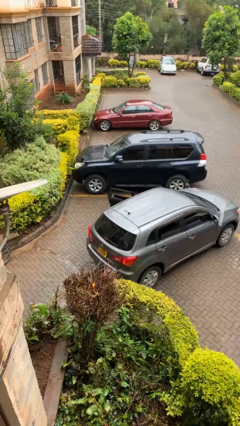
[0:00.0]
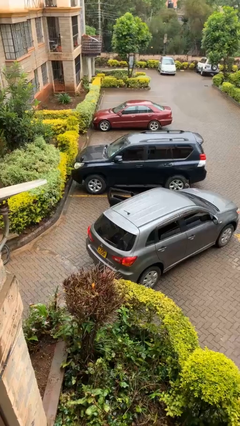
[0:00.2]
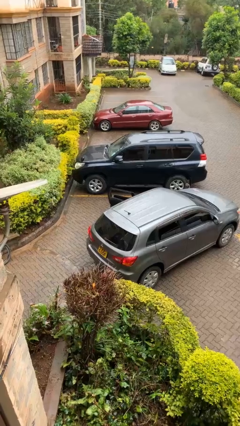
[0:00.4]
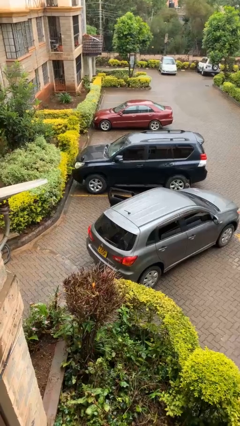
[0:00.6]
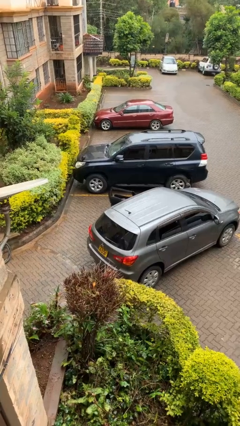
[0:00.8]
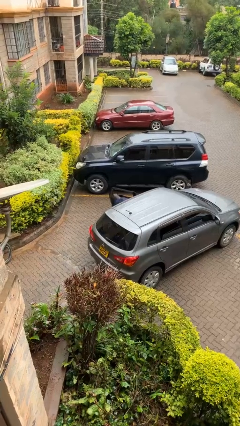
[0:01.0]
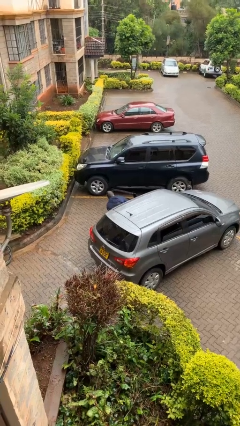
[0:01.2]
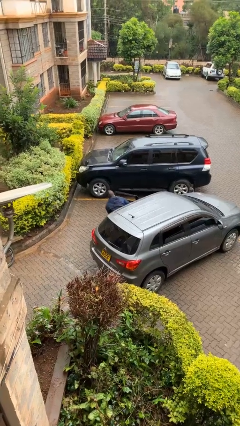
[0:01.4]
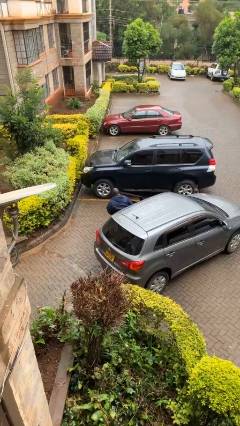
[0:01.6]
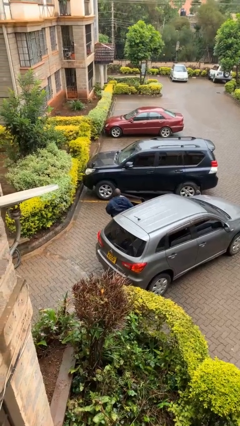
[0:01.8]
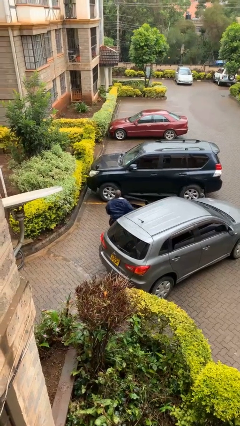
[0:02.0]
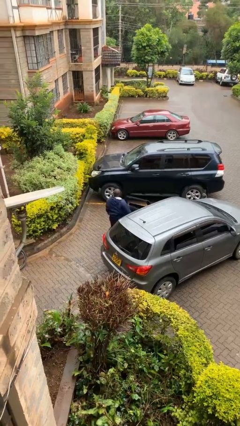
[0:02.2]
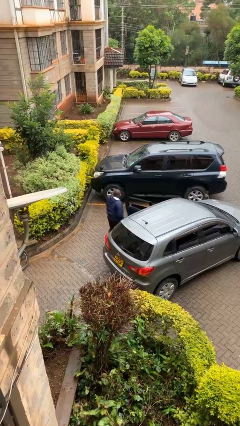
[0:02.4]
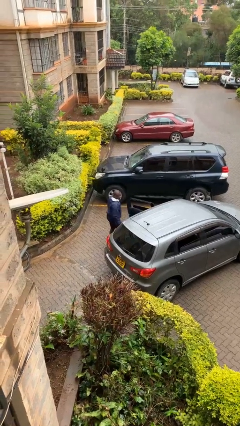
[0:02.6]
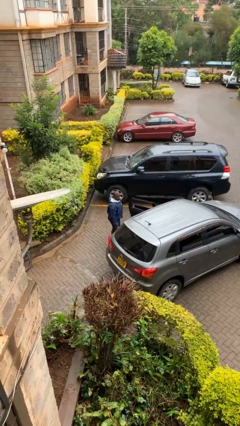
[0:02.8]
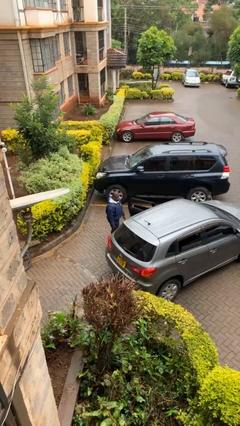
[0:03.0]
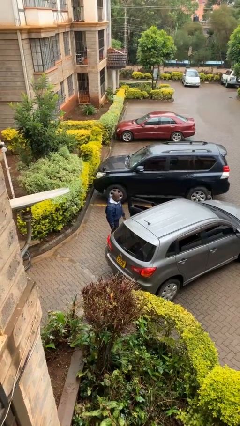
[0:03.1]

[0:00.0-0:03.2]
person exits car

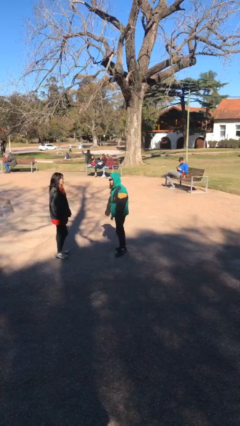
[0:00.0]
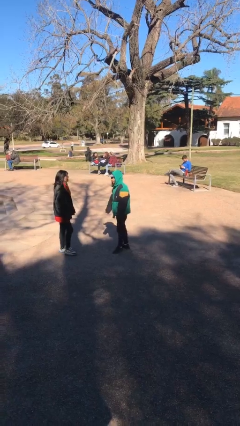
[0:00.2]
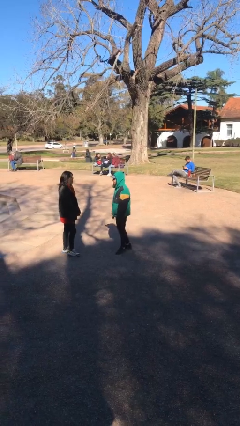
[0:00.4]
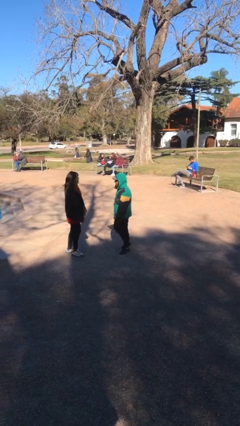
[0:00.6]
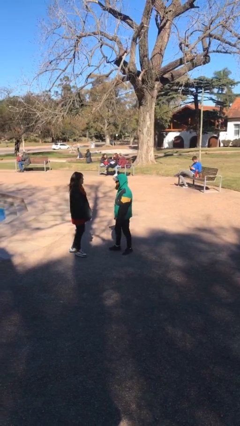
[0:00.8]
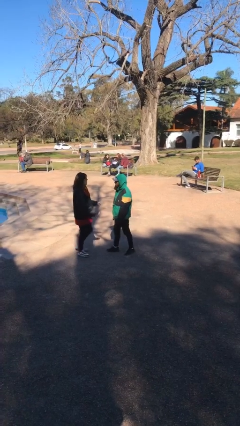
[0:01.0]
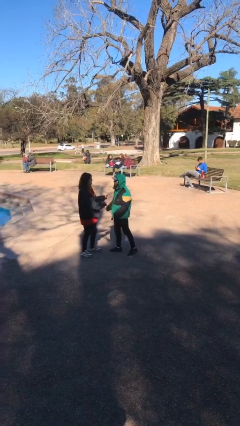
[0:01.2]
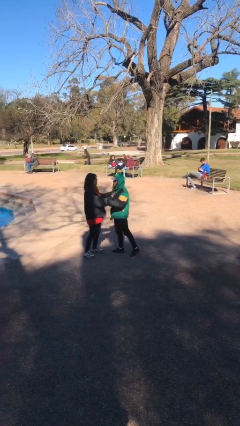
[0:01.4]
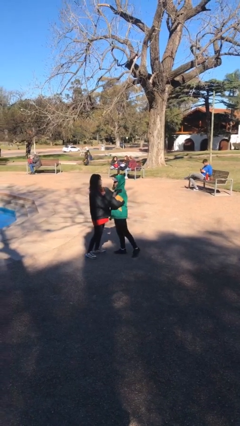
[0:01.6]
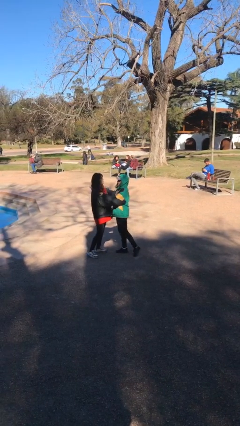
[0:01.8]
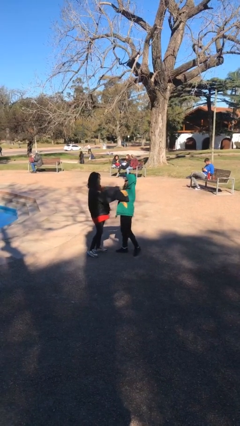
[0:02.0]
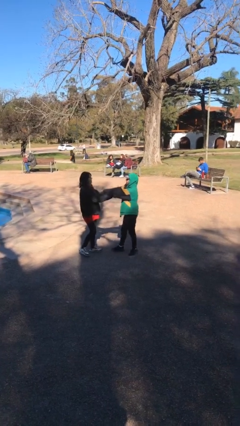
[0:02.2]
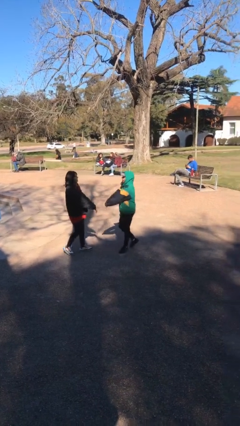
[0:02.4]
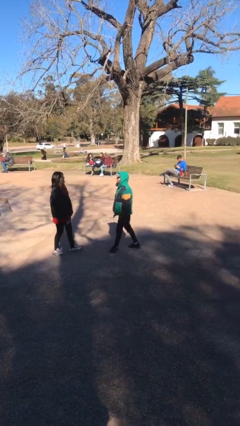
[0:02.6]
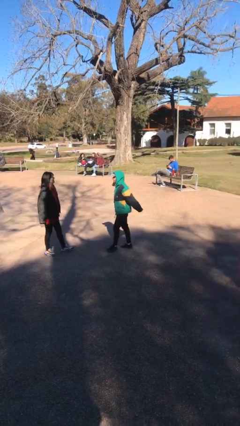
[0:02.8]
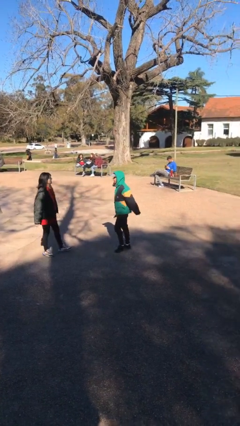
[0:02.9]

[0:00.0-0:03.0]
person shoves person

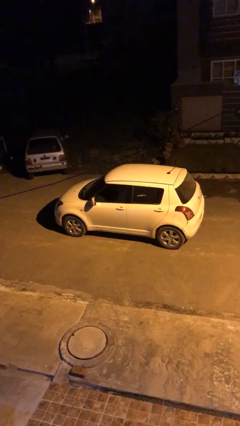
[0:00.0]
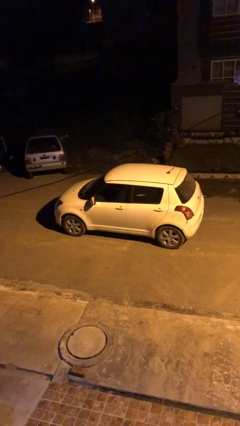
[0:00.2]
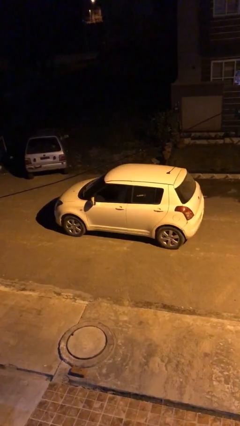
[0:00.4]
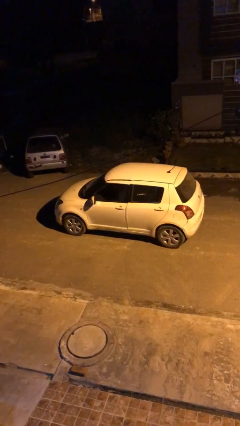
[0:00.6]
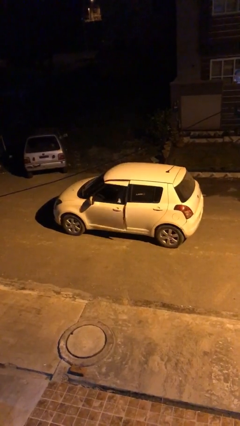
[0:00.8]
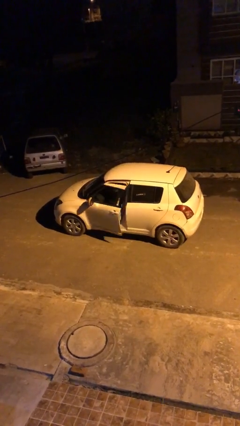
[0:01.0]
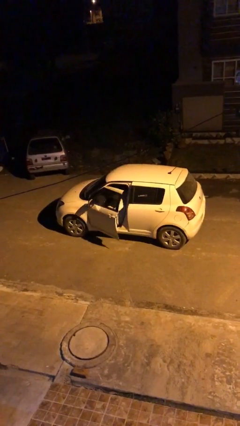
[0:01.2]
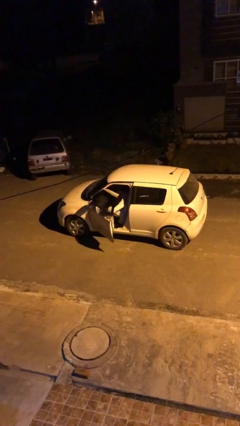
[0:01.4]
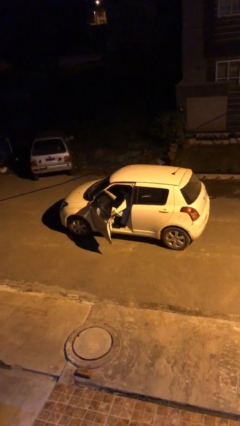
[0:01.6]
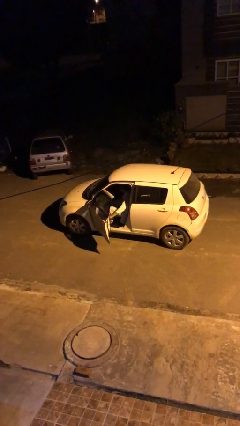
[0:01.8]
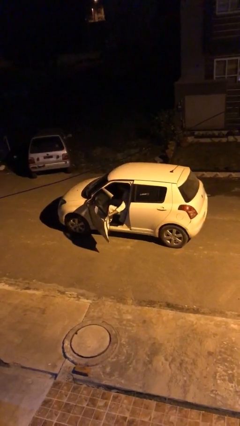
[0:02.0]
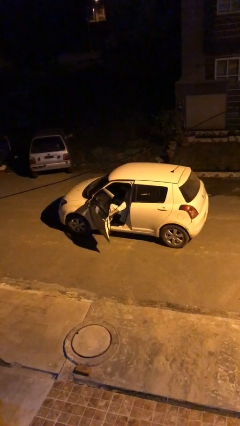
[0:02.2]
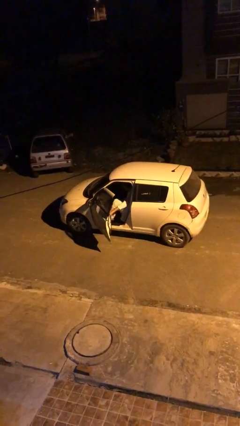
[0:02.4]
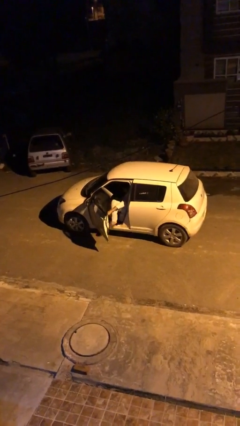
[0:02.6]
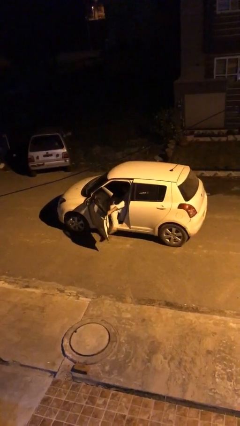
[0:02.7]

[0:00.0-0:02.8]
person opens car door

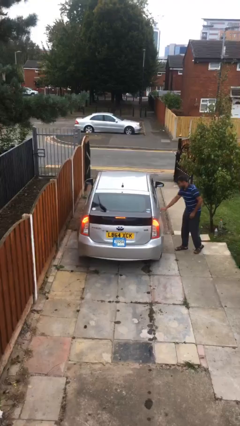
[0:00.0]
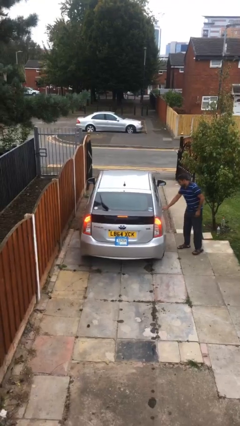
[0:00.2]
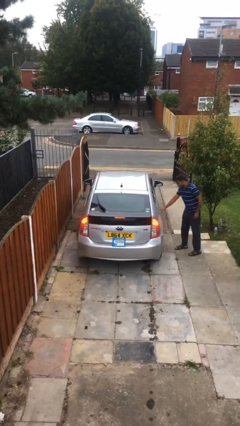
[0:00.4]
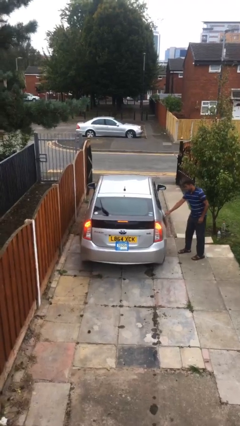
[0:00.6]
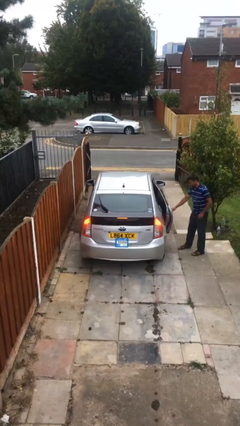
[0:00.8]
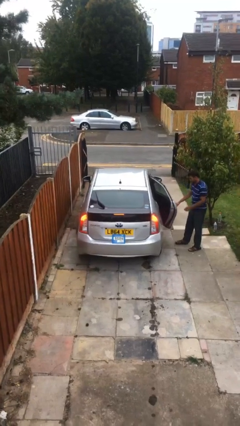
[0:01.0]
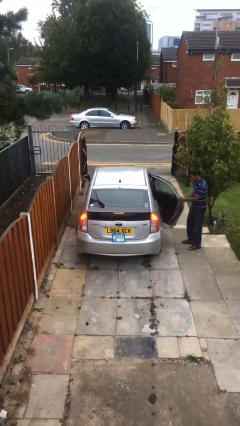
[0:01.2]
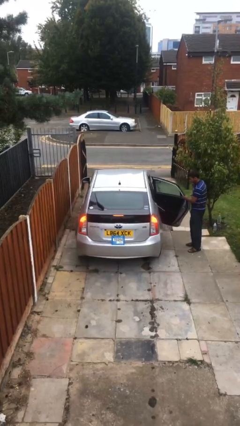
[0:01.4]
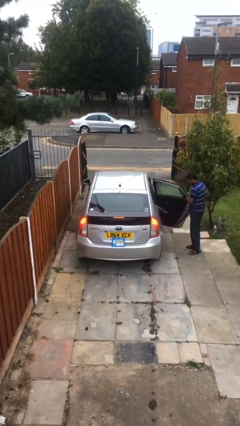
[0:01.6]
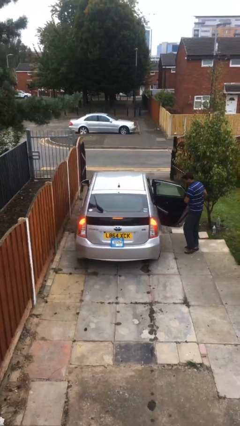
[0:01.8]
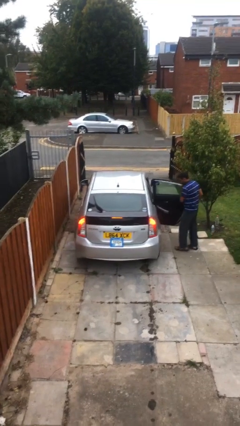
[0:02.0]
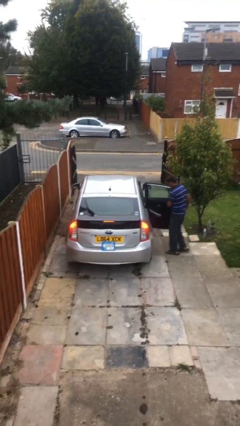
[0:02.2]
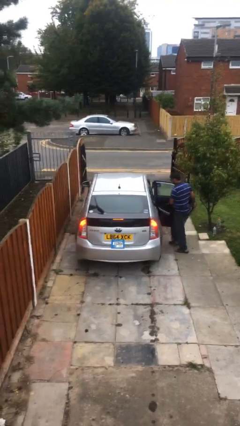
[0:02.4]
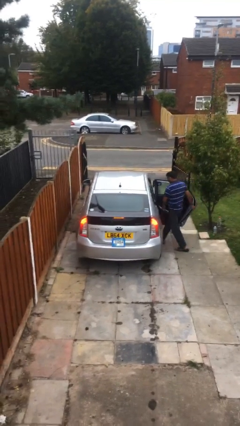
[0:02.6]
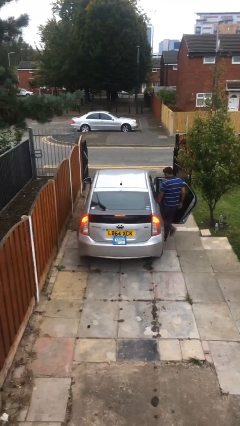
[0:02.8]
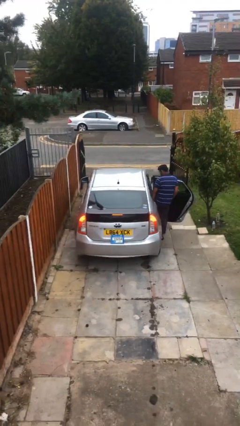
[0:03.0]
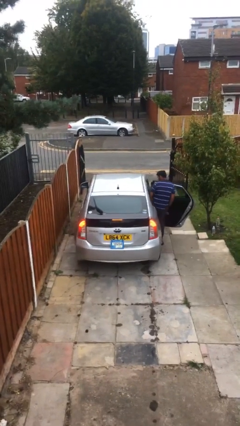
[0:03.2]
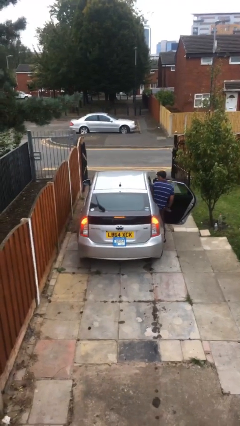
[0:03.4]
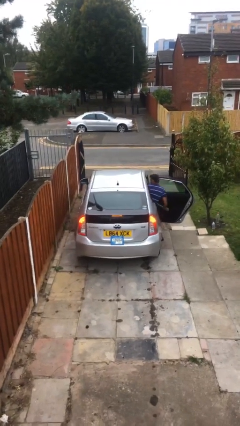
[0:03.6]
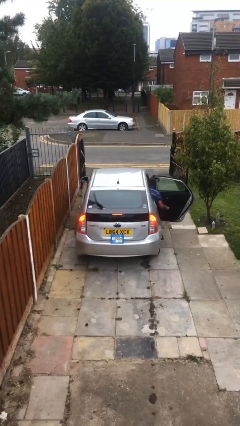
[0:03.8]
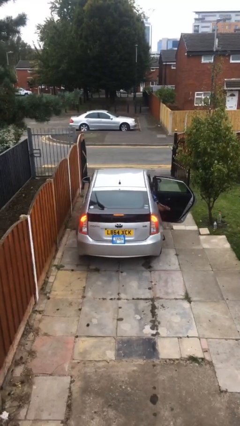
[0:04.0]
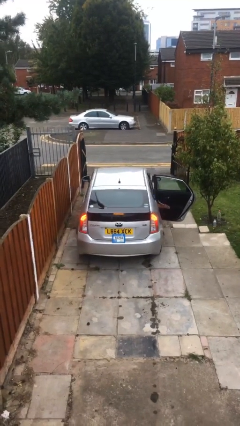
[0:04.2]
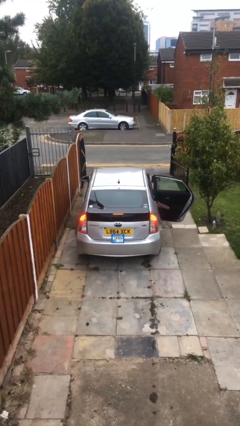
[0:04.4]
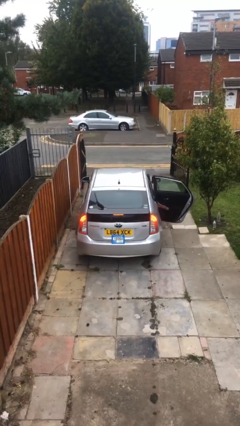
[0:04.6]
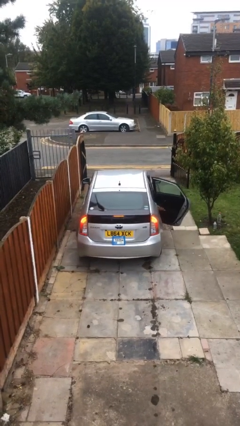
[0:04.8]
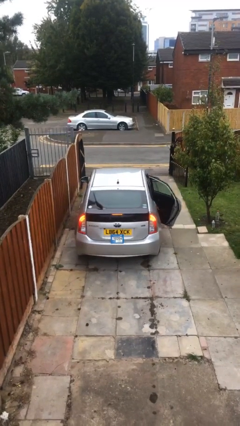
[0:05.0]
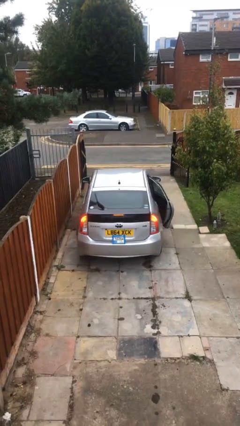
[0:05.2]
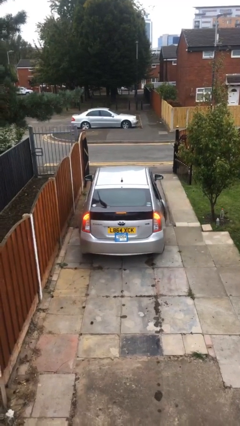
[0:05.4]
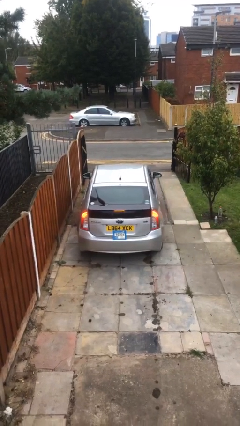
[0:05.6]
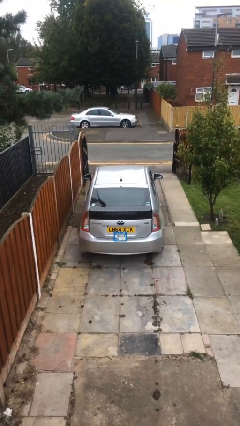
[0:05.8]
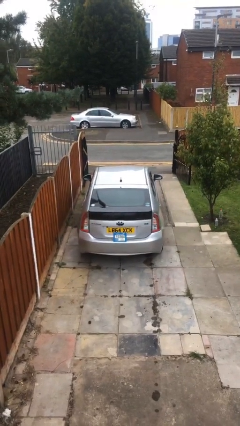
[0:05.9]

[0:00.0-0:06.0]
car picks up person

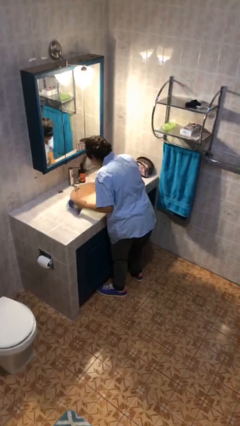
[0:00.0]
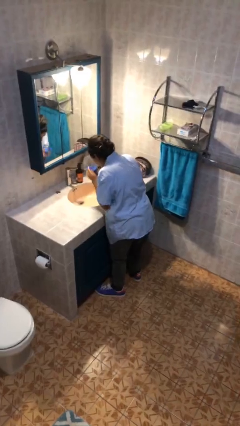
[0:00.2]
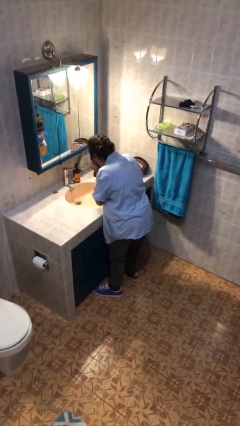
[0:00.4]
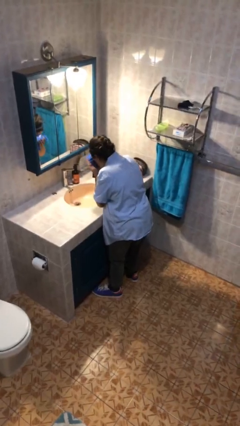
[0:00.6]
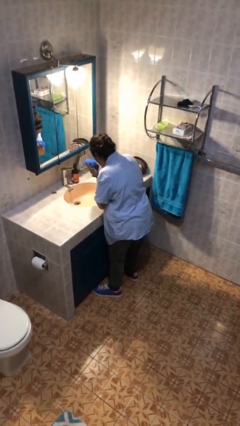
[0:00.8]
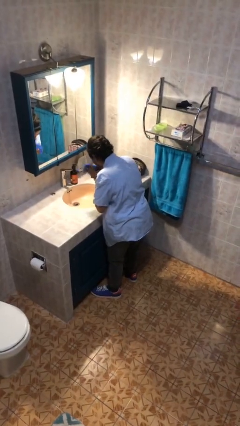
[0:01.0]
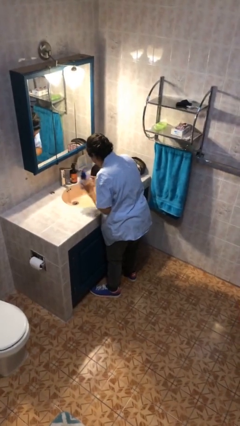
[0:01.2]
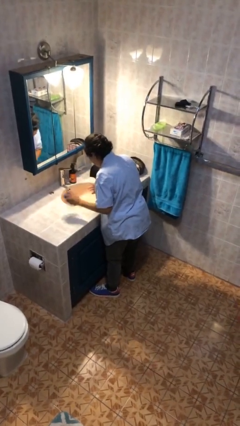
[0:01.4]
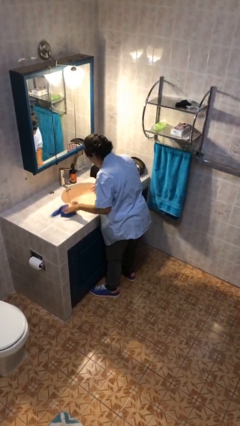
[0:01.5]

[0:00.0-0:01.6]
person dries face with towel

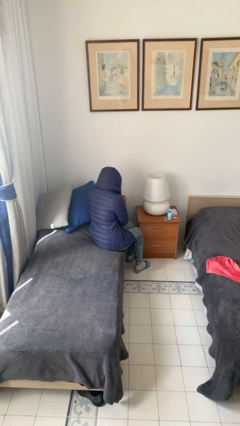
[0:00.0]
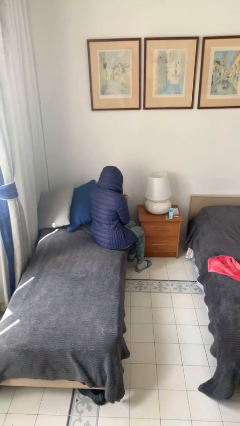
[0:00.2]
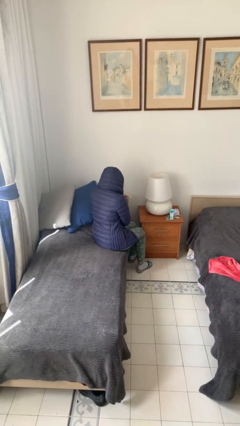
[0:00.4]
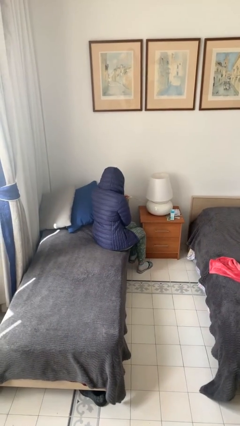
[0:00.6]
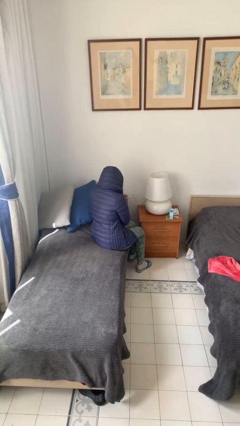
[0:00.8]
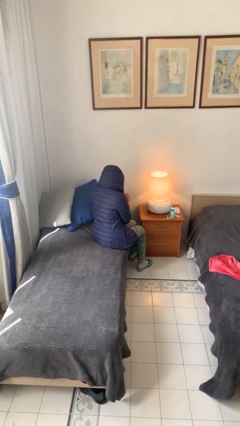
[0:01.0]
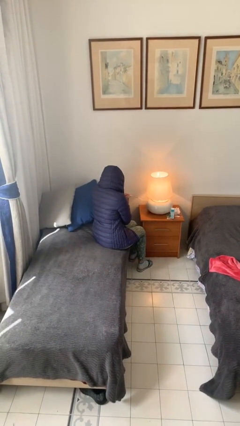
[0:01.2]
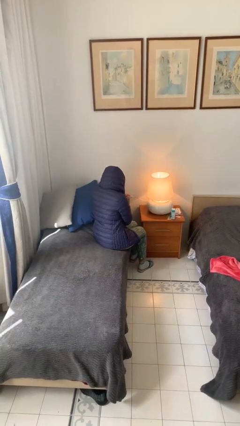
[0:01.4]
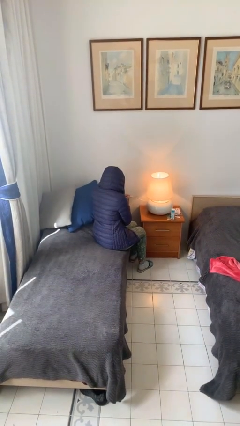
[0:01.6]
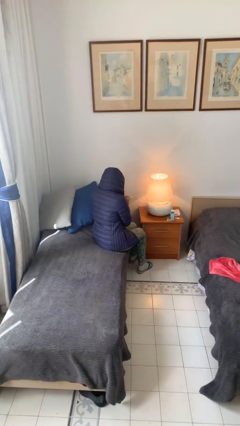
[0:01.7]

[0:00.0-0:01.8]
person turns on lamp
